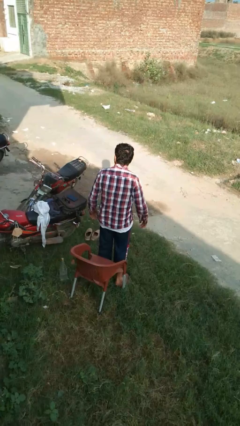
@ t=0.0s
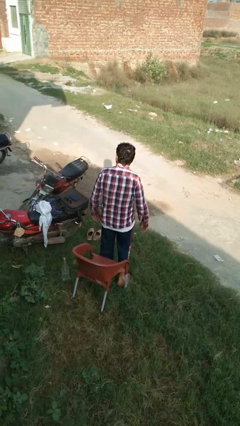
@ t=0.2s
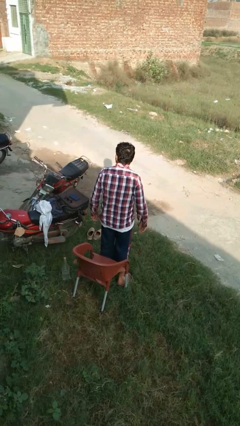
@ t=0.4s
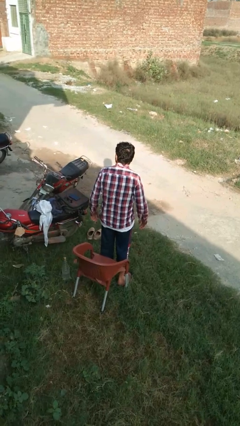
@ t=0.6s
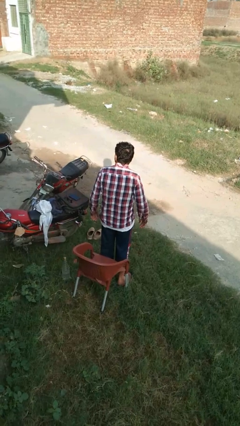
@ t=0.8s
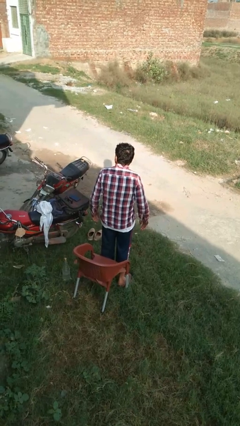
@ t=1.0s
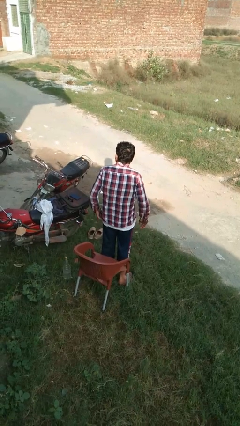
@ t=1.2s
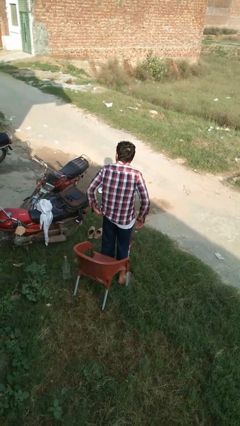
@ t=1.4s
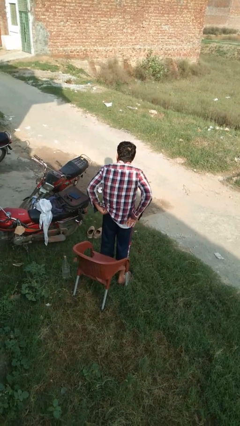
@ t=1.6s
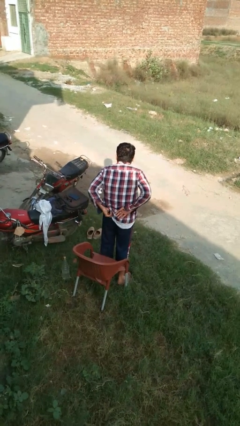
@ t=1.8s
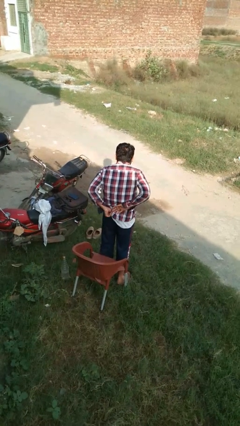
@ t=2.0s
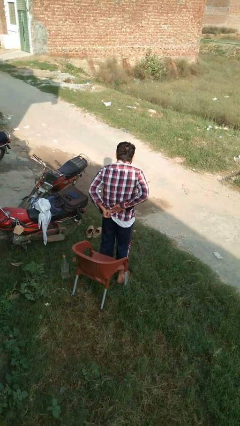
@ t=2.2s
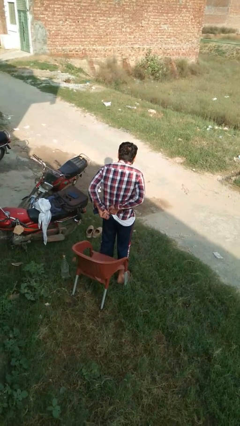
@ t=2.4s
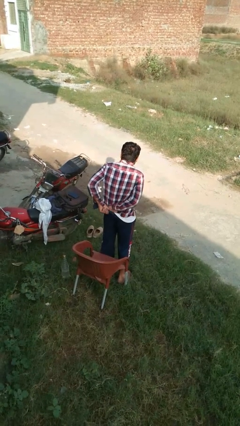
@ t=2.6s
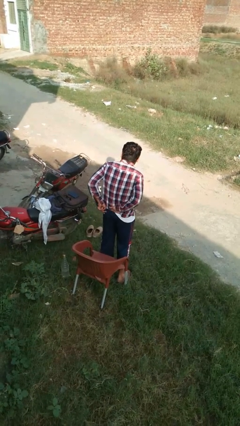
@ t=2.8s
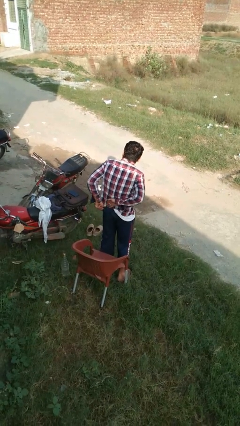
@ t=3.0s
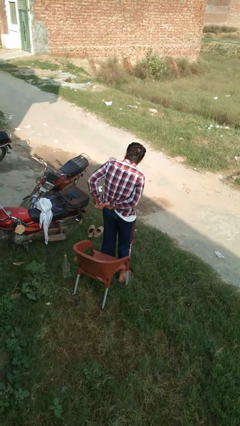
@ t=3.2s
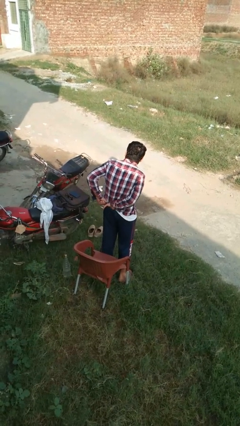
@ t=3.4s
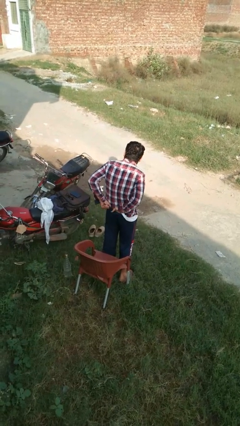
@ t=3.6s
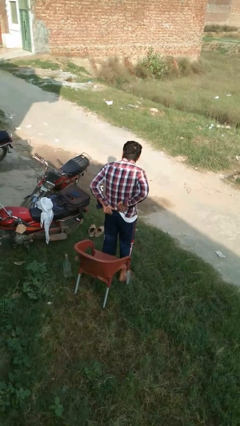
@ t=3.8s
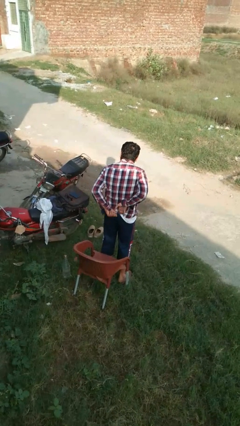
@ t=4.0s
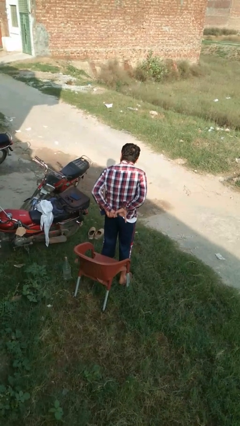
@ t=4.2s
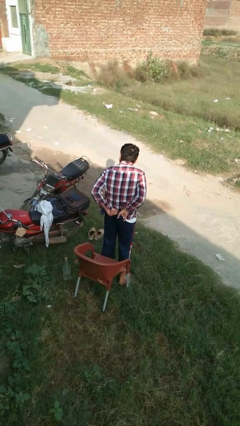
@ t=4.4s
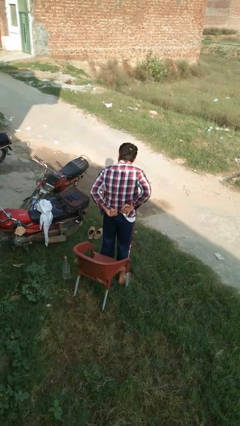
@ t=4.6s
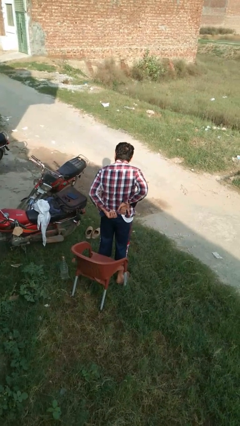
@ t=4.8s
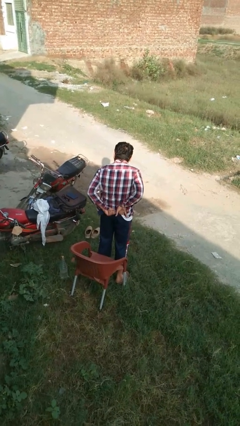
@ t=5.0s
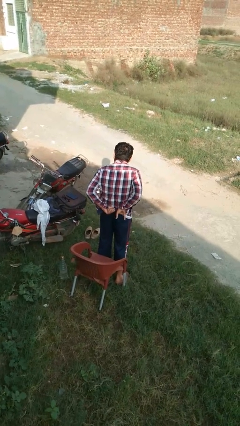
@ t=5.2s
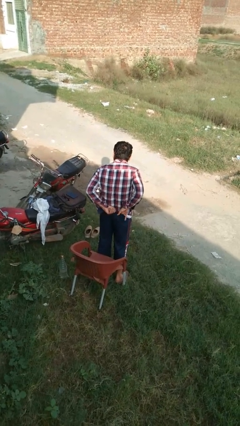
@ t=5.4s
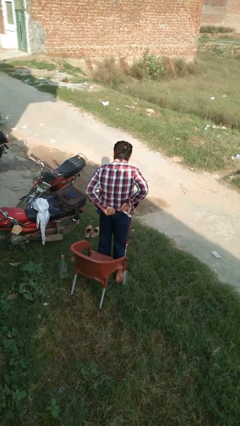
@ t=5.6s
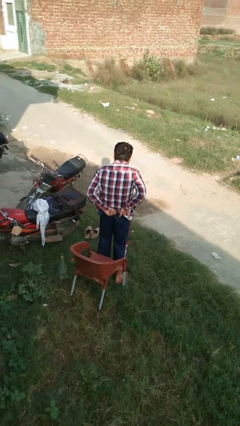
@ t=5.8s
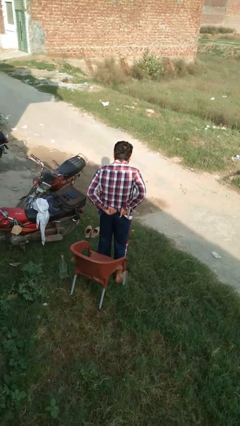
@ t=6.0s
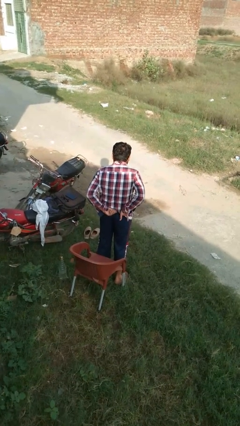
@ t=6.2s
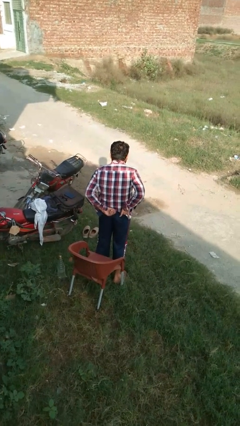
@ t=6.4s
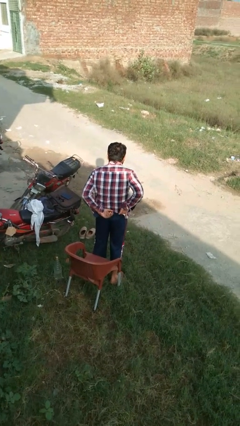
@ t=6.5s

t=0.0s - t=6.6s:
person tucks in shirt

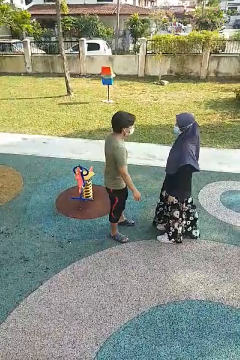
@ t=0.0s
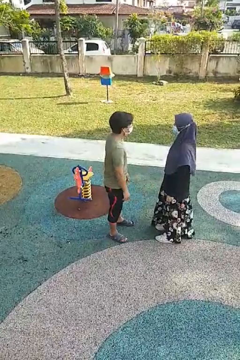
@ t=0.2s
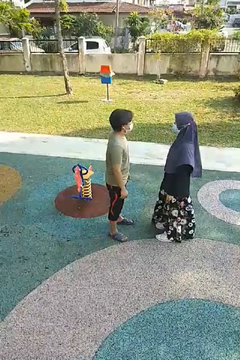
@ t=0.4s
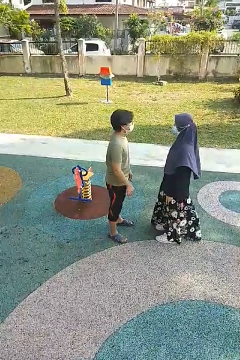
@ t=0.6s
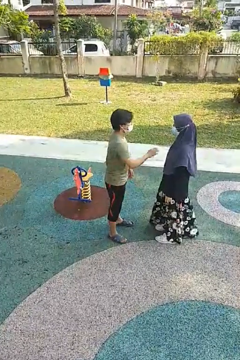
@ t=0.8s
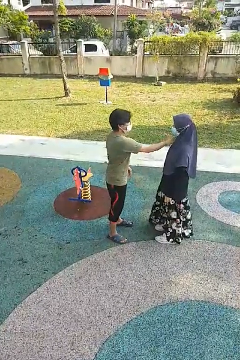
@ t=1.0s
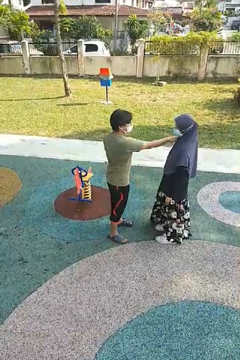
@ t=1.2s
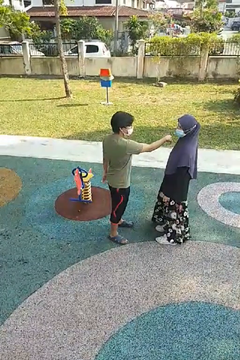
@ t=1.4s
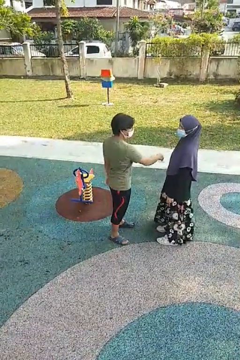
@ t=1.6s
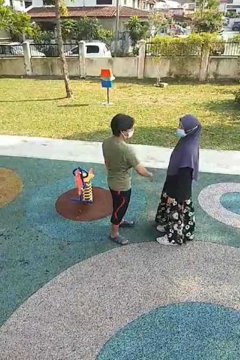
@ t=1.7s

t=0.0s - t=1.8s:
person shoves person

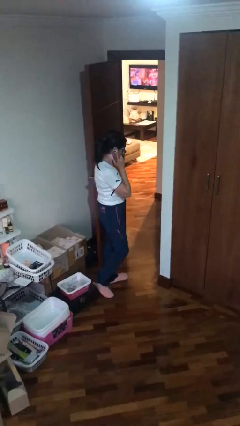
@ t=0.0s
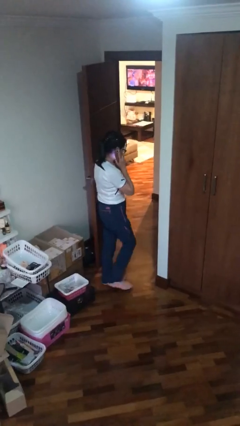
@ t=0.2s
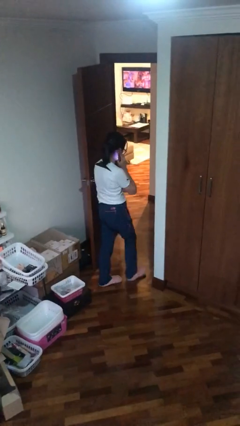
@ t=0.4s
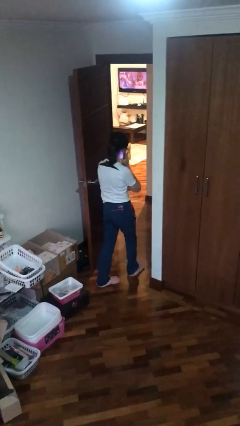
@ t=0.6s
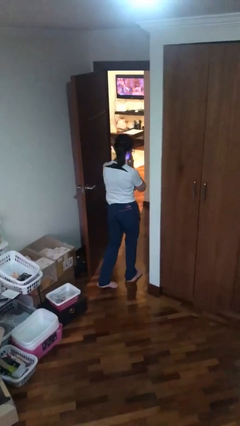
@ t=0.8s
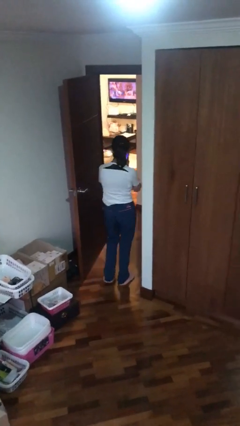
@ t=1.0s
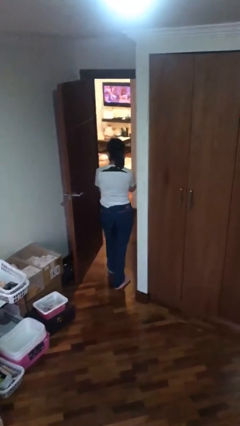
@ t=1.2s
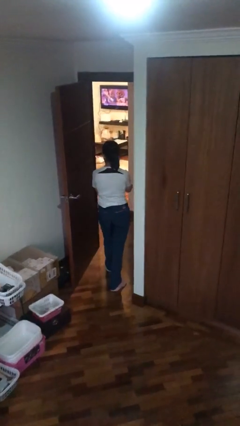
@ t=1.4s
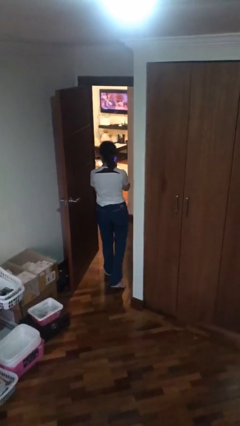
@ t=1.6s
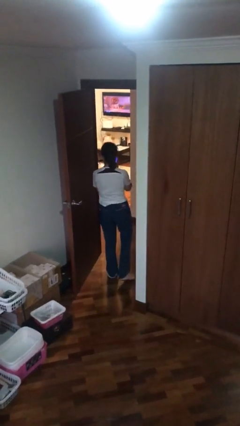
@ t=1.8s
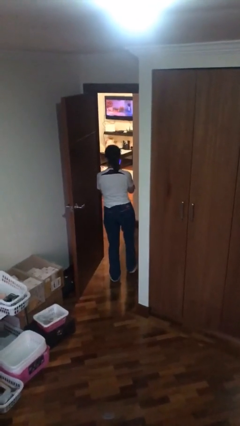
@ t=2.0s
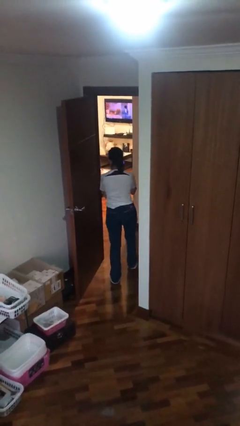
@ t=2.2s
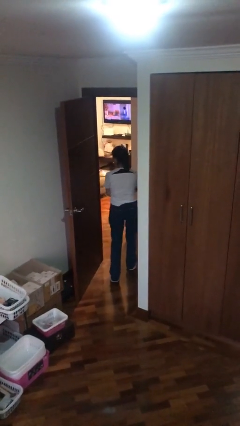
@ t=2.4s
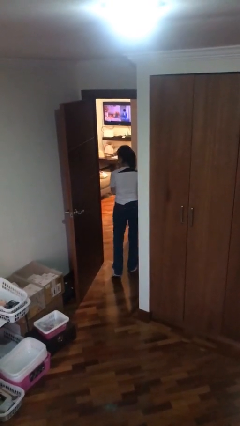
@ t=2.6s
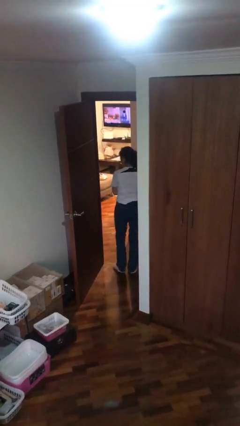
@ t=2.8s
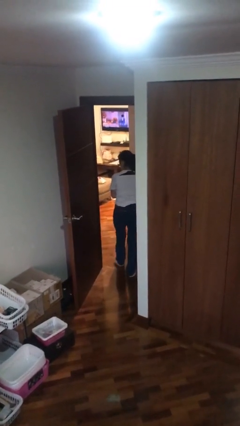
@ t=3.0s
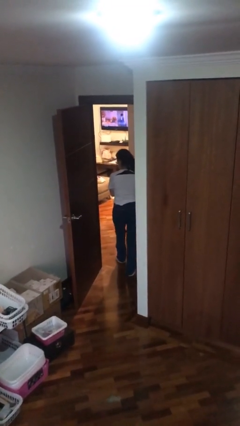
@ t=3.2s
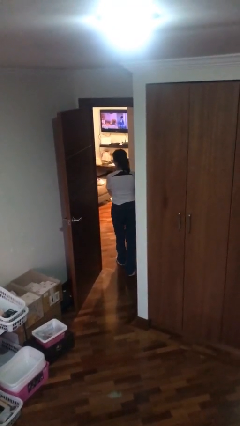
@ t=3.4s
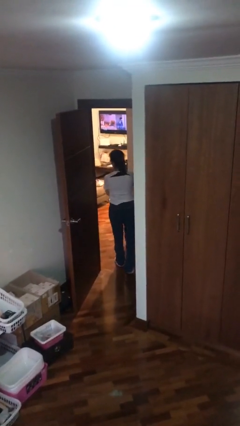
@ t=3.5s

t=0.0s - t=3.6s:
person exits scene through structure

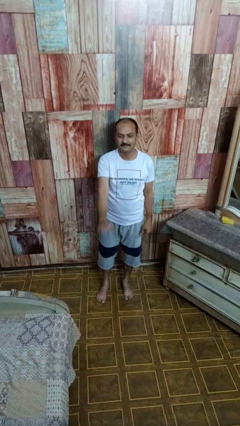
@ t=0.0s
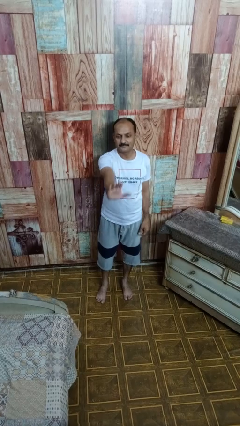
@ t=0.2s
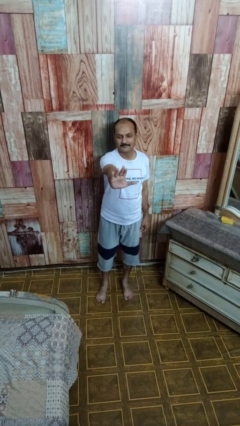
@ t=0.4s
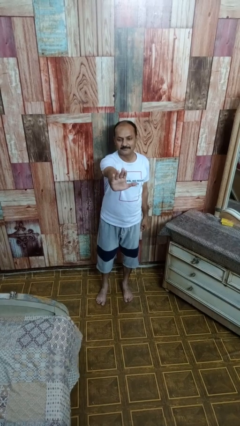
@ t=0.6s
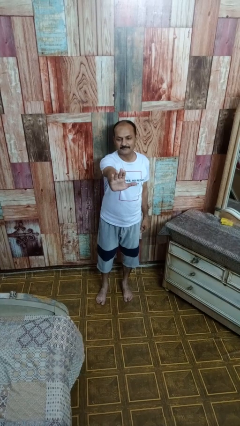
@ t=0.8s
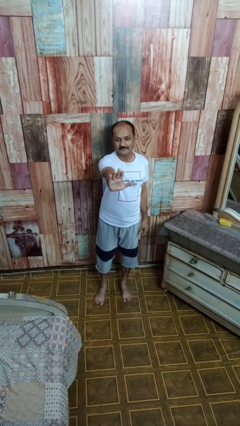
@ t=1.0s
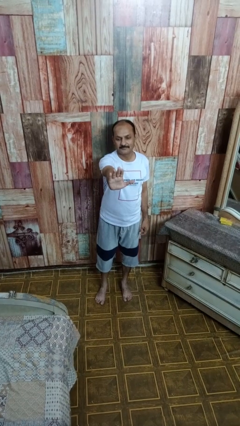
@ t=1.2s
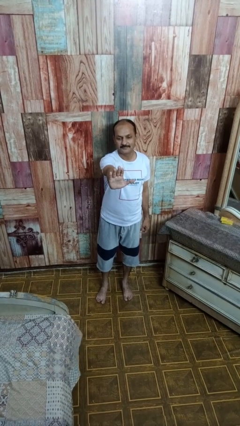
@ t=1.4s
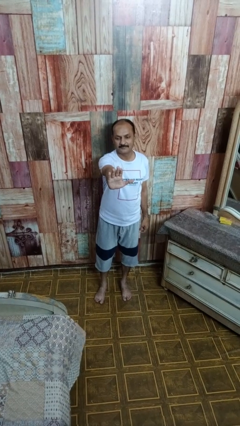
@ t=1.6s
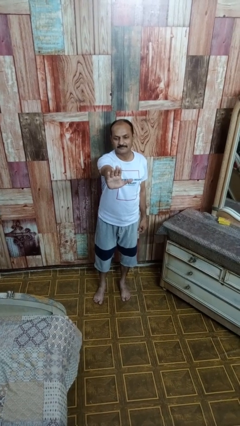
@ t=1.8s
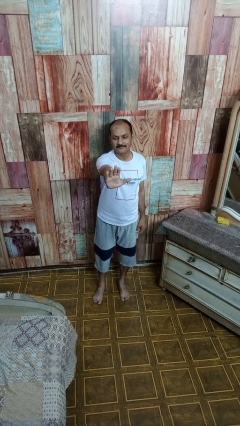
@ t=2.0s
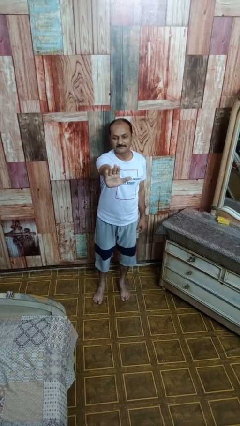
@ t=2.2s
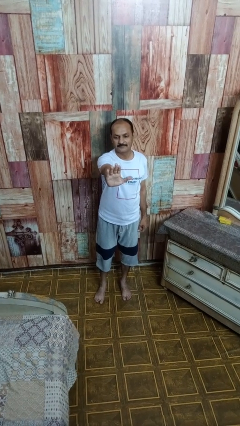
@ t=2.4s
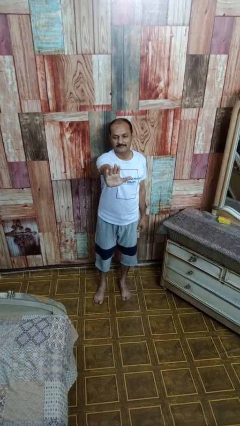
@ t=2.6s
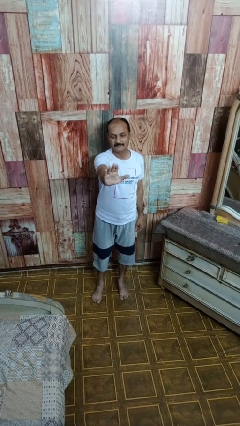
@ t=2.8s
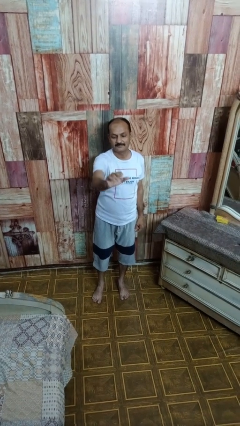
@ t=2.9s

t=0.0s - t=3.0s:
person gestures stop

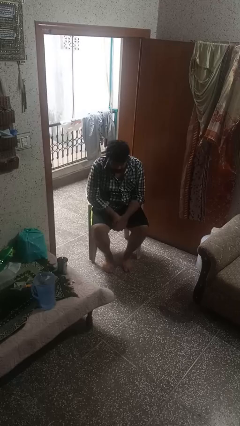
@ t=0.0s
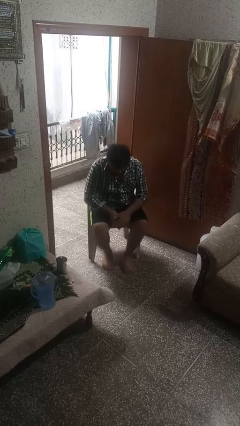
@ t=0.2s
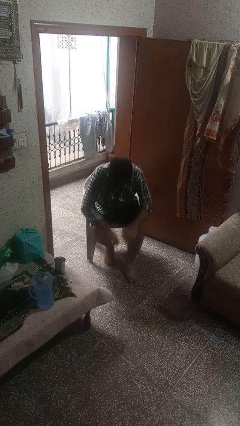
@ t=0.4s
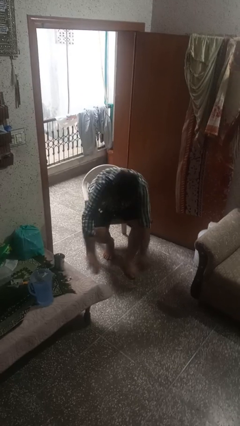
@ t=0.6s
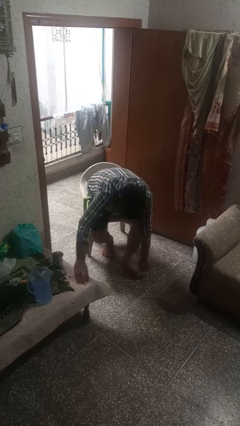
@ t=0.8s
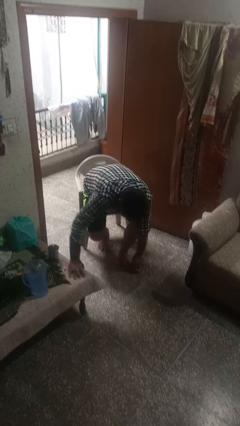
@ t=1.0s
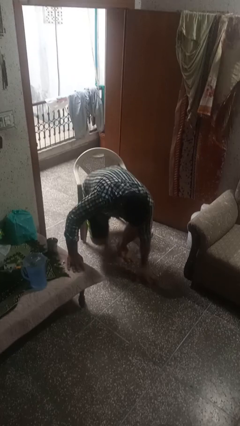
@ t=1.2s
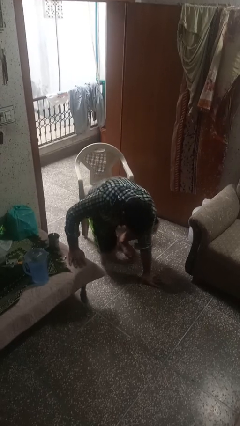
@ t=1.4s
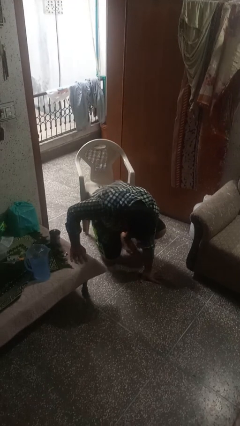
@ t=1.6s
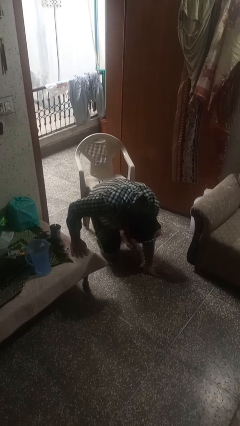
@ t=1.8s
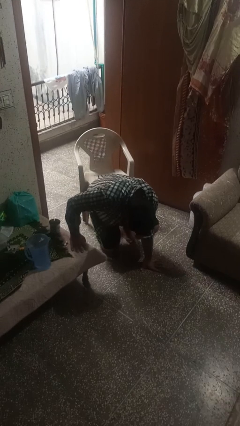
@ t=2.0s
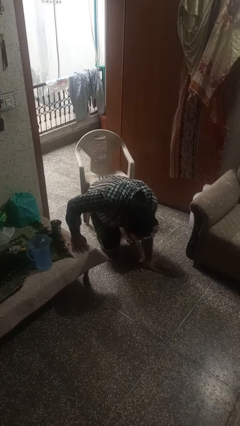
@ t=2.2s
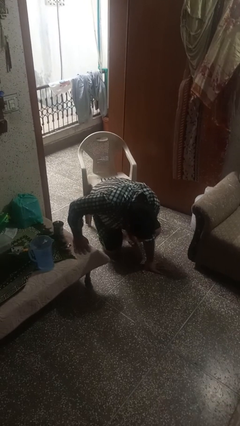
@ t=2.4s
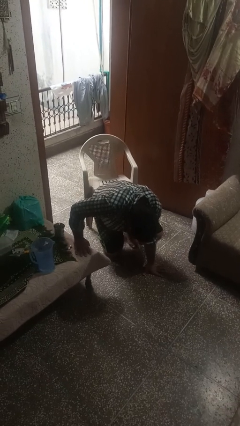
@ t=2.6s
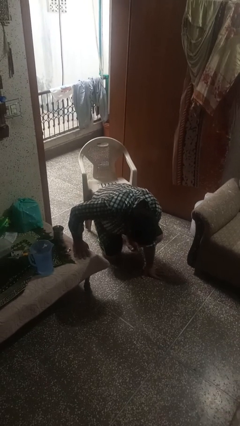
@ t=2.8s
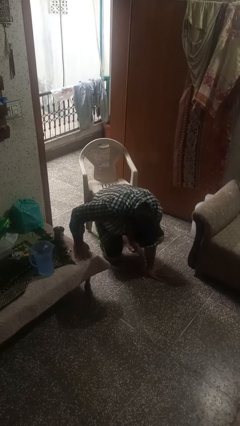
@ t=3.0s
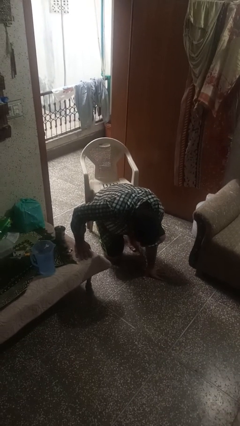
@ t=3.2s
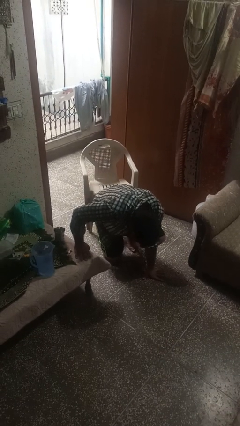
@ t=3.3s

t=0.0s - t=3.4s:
person falls from chair
